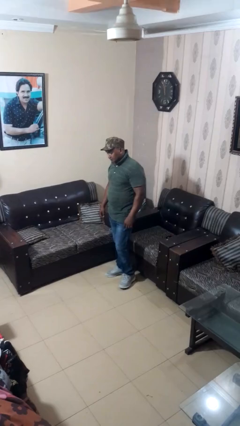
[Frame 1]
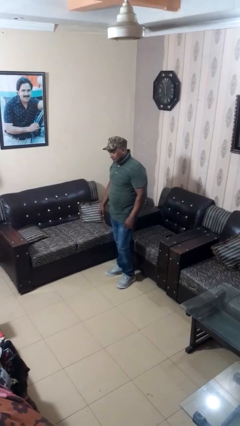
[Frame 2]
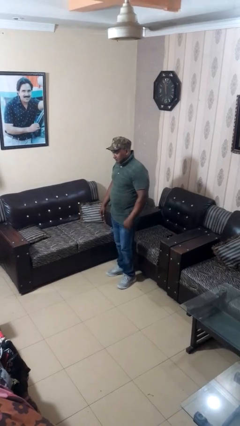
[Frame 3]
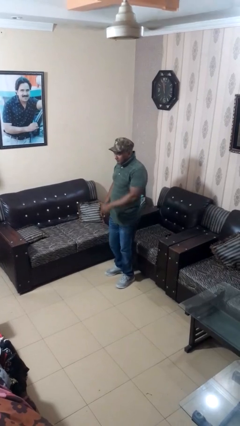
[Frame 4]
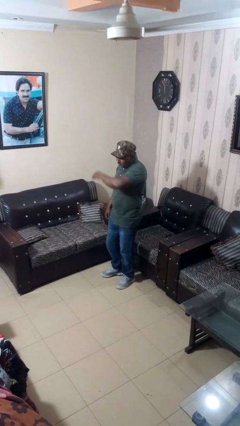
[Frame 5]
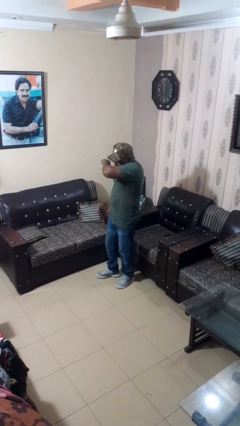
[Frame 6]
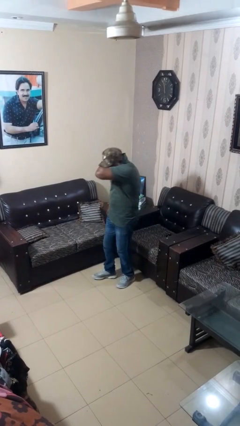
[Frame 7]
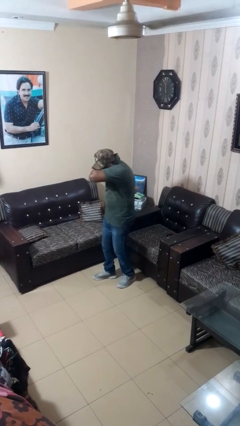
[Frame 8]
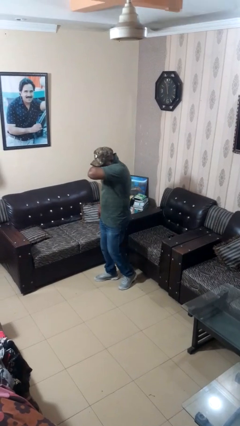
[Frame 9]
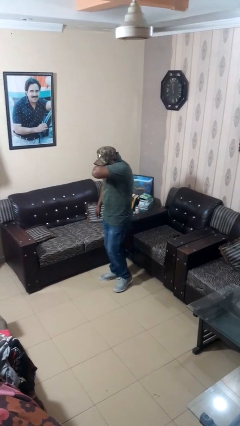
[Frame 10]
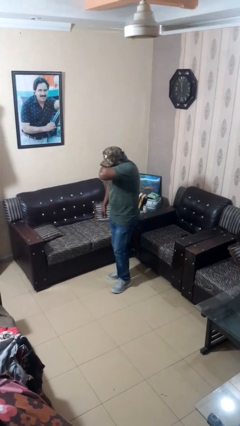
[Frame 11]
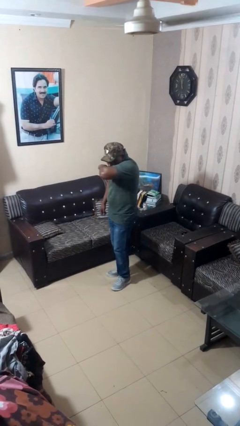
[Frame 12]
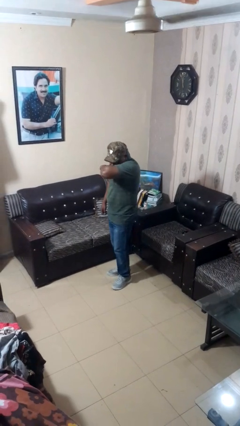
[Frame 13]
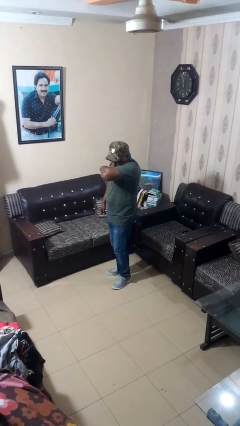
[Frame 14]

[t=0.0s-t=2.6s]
person sneezes into arm

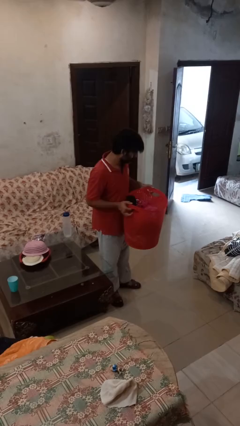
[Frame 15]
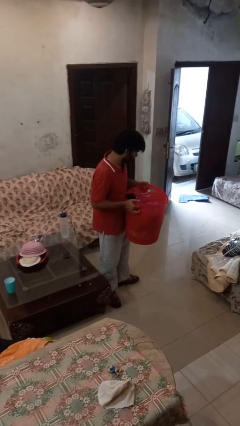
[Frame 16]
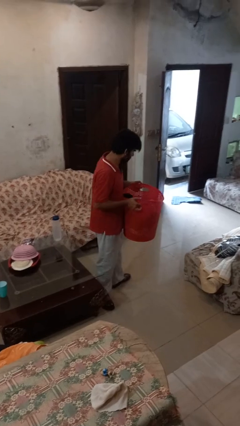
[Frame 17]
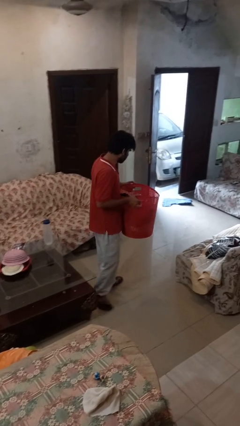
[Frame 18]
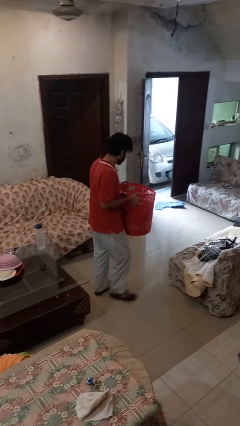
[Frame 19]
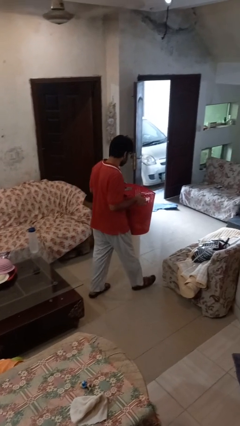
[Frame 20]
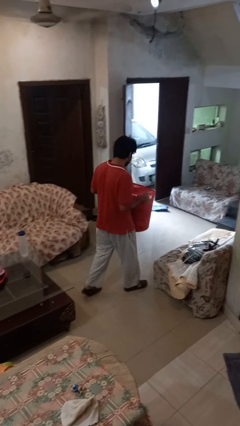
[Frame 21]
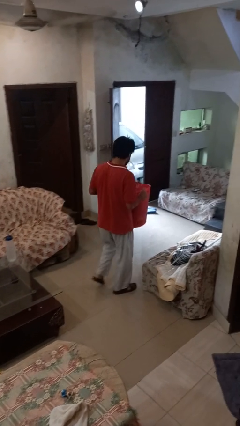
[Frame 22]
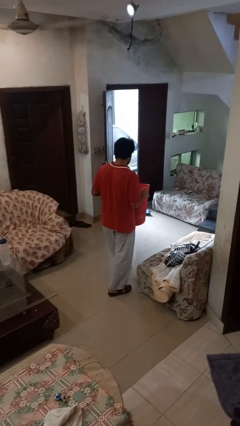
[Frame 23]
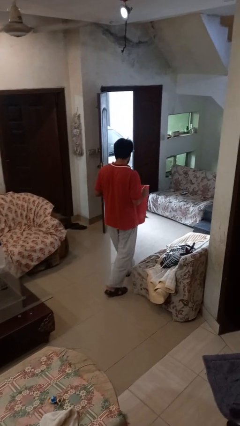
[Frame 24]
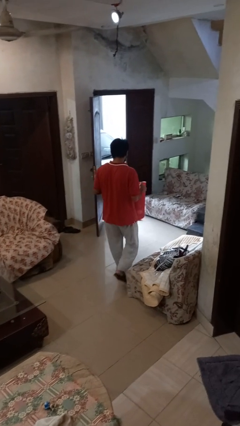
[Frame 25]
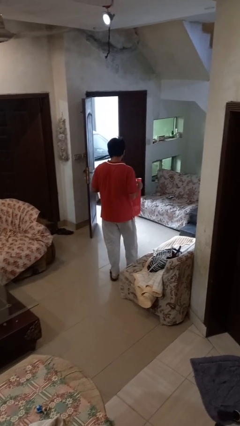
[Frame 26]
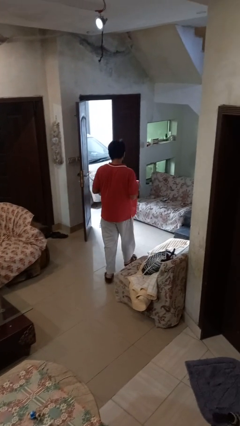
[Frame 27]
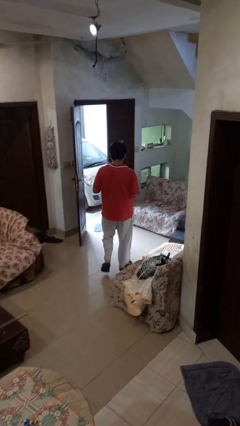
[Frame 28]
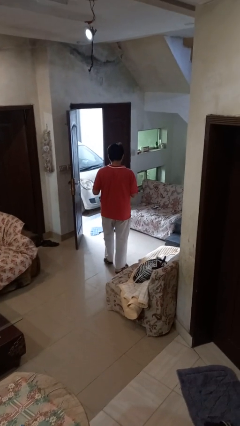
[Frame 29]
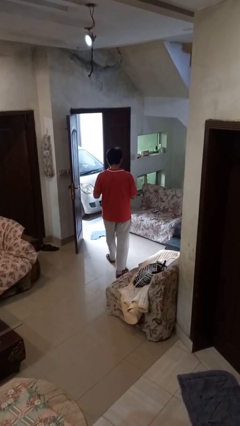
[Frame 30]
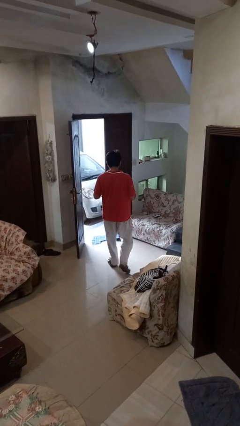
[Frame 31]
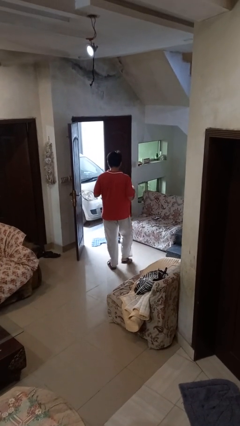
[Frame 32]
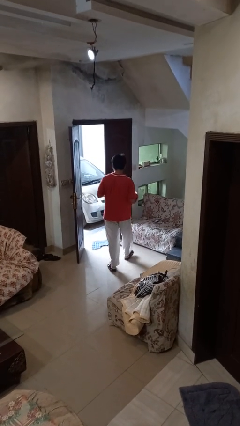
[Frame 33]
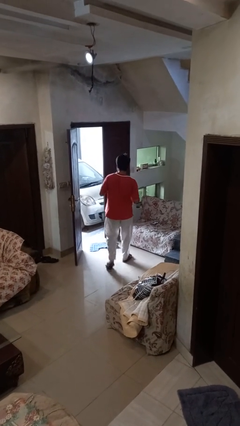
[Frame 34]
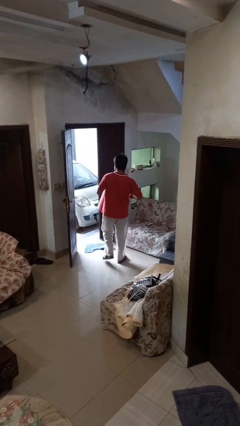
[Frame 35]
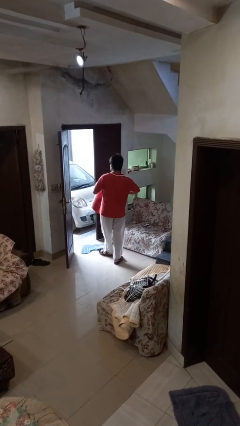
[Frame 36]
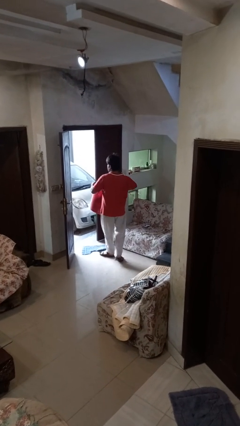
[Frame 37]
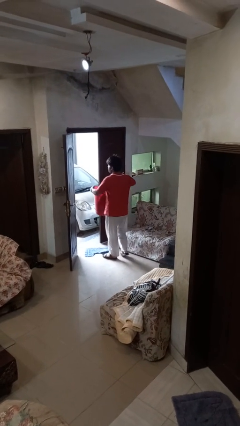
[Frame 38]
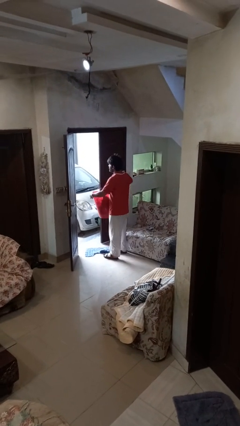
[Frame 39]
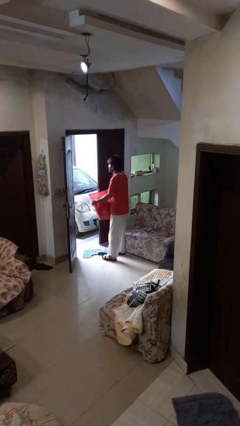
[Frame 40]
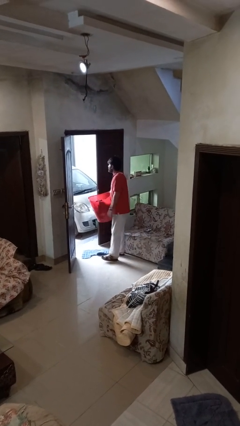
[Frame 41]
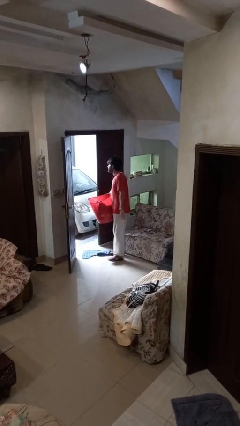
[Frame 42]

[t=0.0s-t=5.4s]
person carries laundry basket

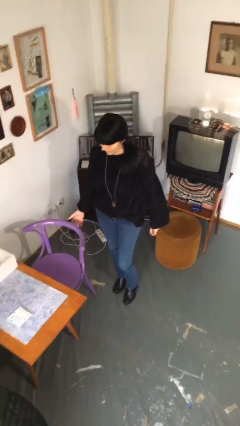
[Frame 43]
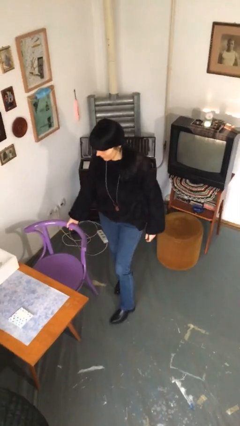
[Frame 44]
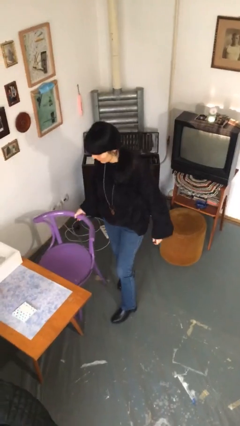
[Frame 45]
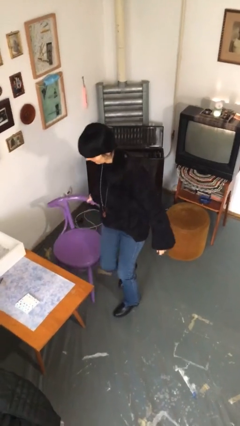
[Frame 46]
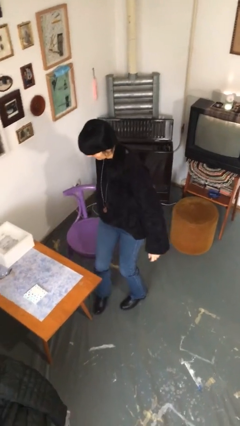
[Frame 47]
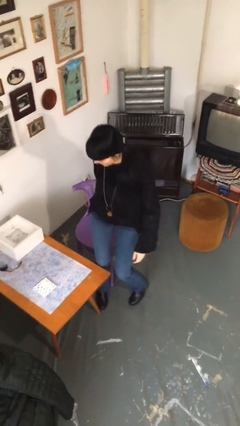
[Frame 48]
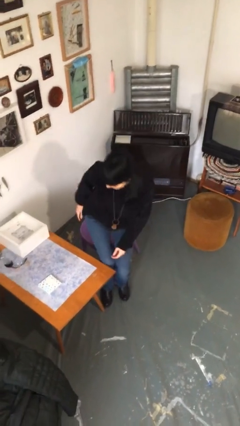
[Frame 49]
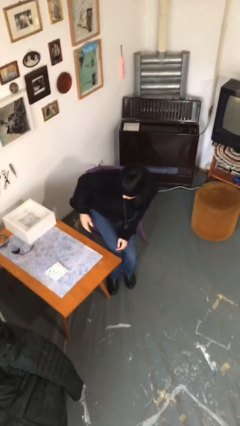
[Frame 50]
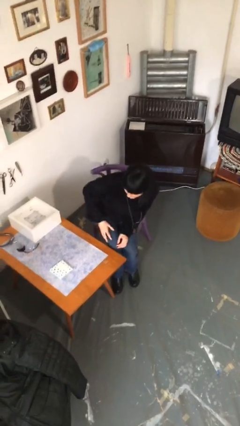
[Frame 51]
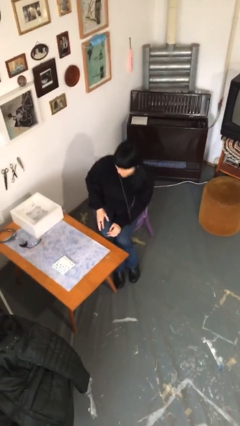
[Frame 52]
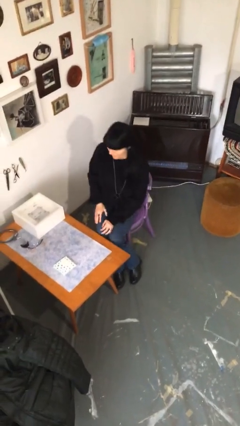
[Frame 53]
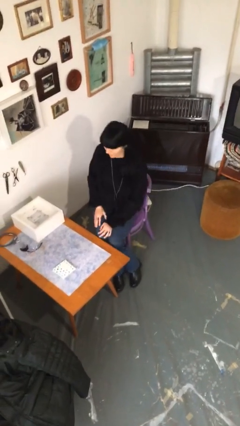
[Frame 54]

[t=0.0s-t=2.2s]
person sits down

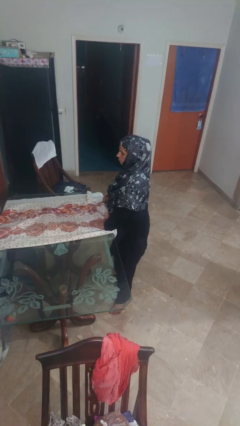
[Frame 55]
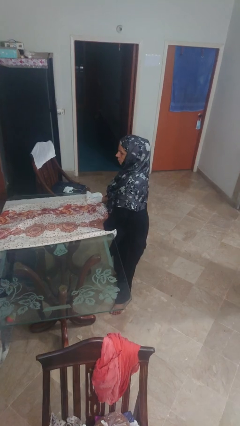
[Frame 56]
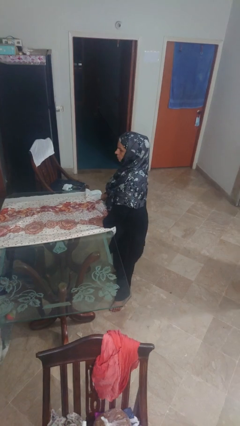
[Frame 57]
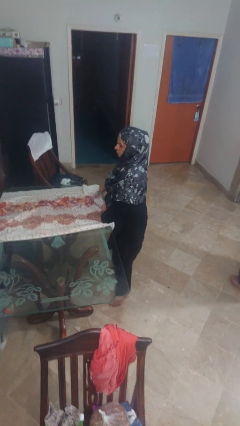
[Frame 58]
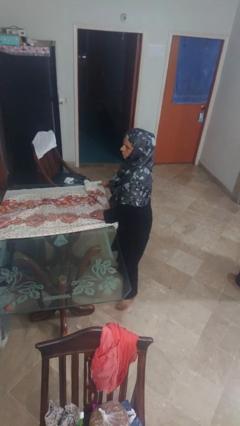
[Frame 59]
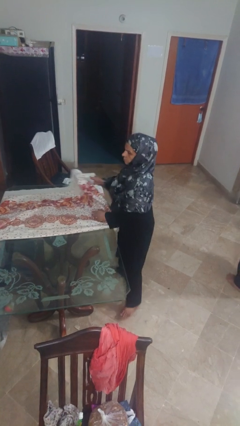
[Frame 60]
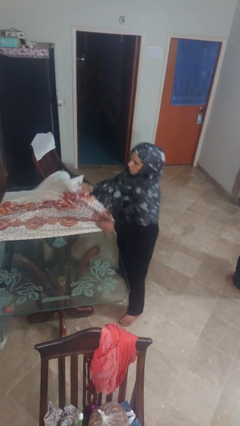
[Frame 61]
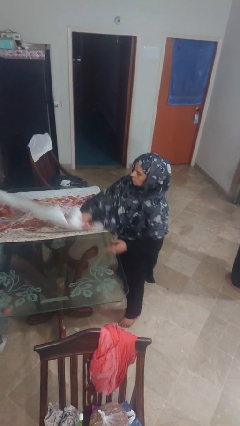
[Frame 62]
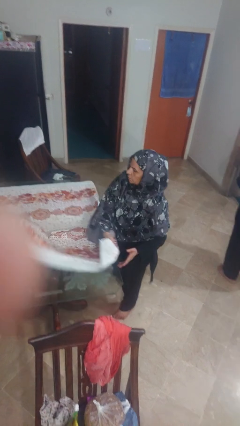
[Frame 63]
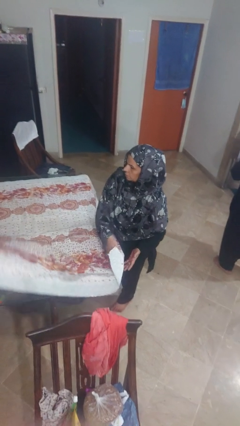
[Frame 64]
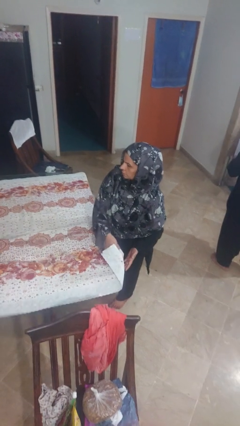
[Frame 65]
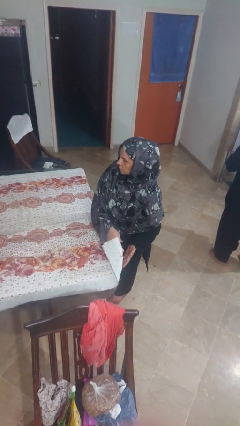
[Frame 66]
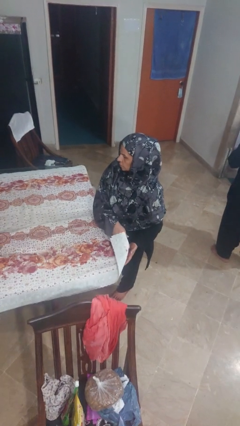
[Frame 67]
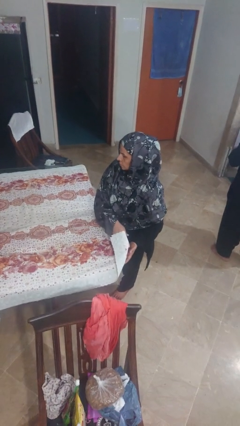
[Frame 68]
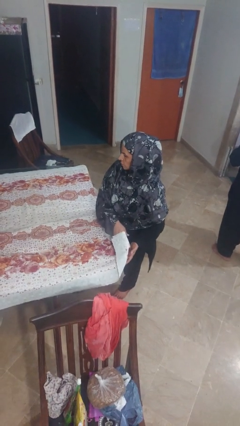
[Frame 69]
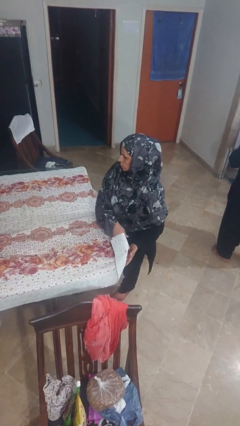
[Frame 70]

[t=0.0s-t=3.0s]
person spreads tablecloth

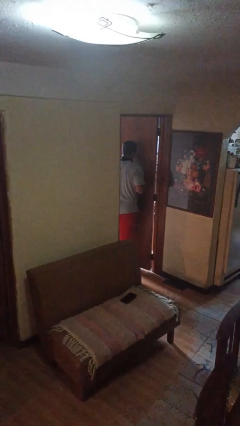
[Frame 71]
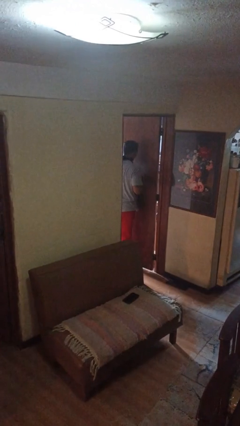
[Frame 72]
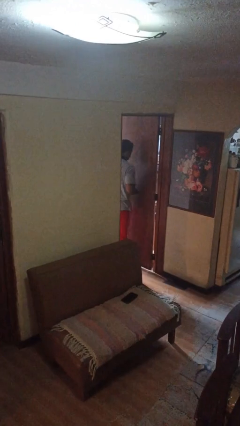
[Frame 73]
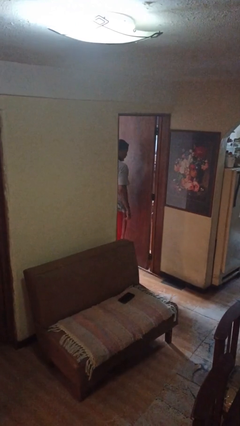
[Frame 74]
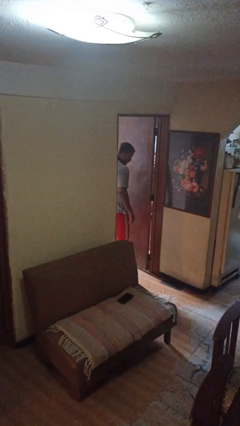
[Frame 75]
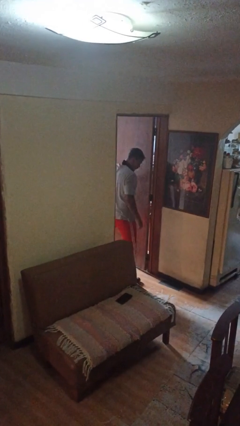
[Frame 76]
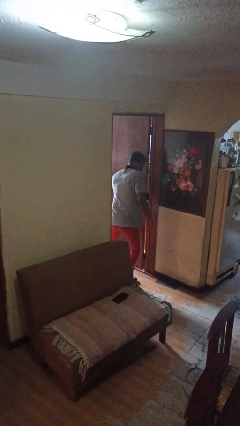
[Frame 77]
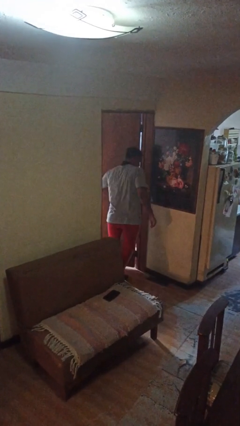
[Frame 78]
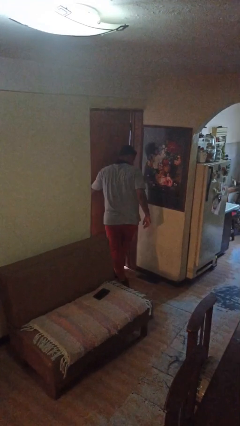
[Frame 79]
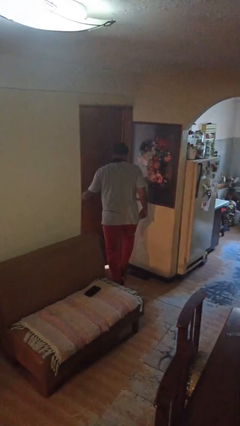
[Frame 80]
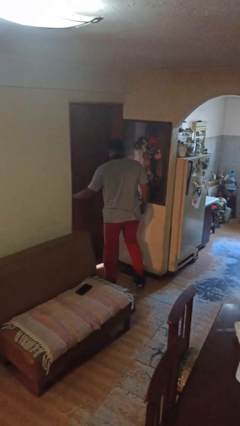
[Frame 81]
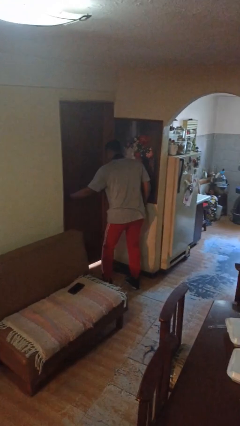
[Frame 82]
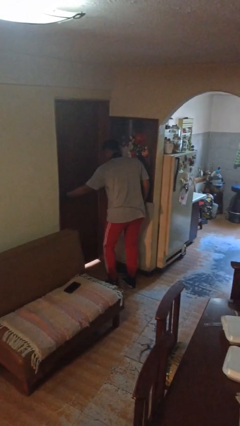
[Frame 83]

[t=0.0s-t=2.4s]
person closes facility door

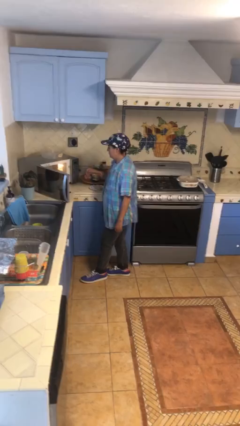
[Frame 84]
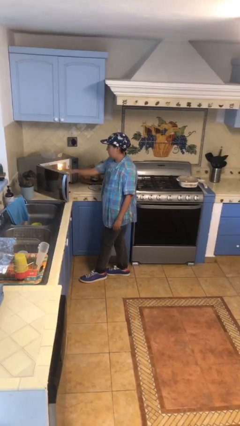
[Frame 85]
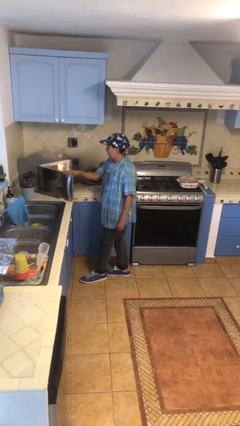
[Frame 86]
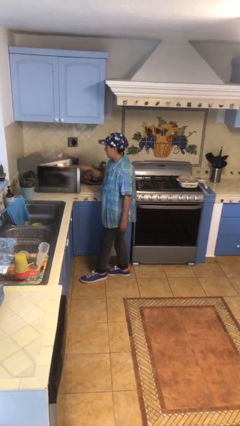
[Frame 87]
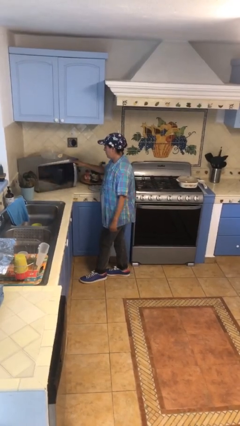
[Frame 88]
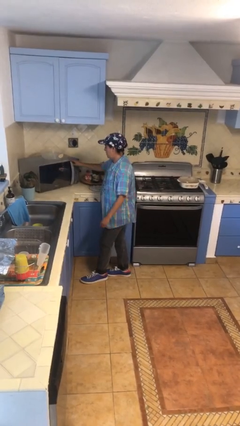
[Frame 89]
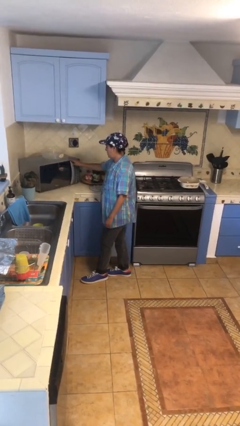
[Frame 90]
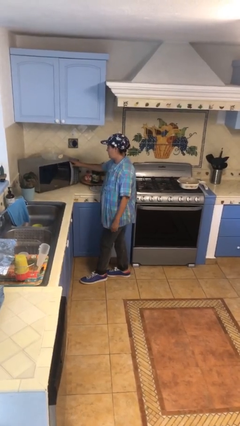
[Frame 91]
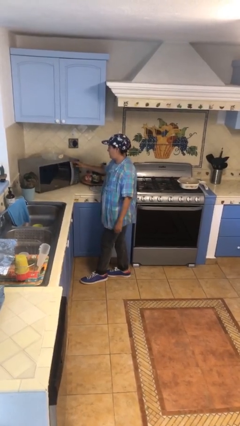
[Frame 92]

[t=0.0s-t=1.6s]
person closes microwave
